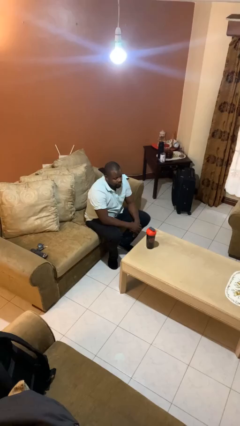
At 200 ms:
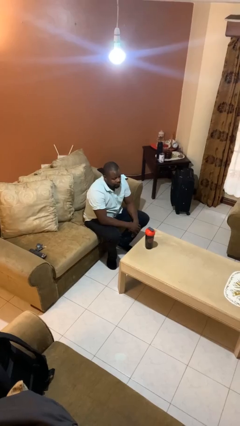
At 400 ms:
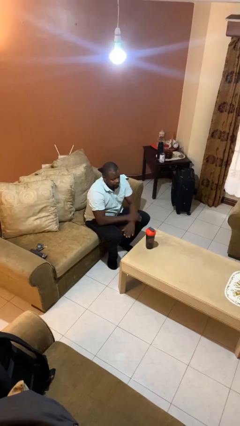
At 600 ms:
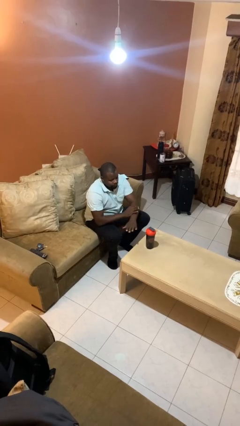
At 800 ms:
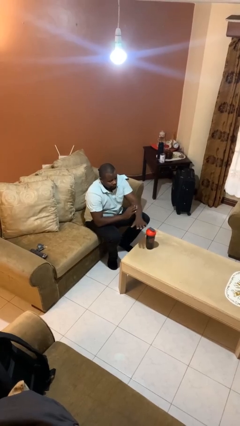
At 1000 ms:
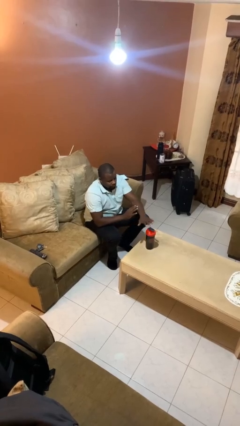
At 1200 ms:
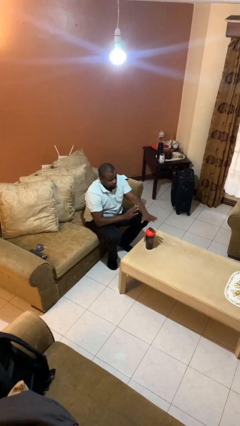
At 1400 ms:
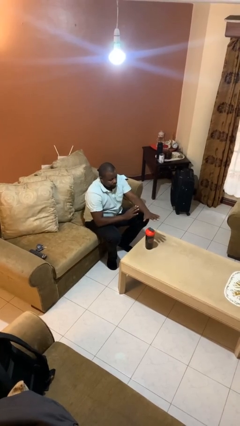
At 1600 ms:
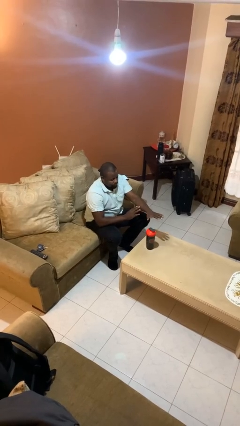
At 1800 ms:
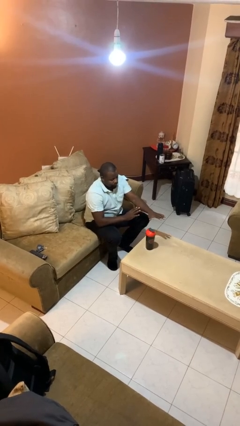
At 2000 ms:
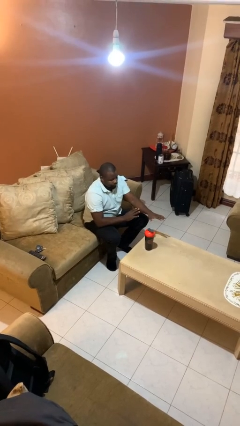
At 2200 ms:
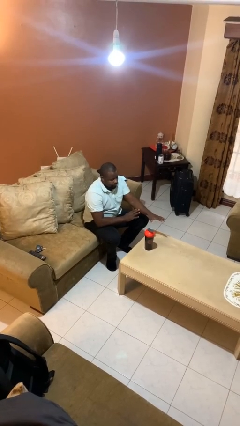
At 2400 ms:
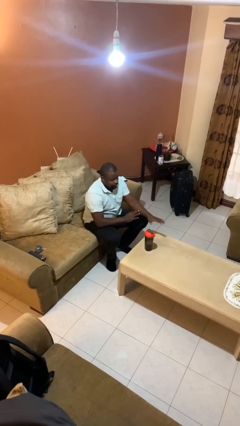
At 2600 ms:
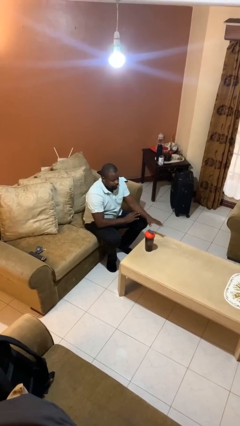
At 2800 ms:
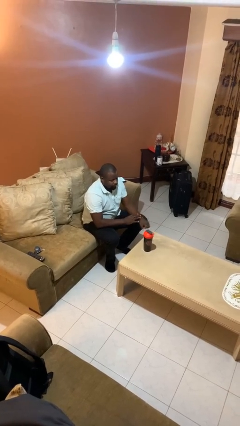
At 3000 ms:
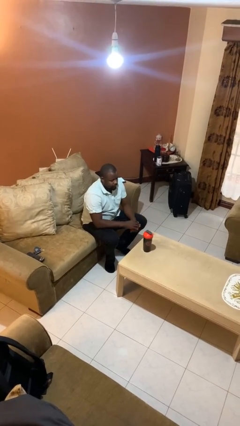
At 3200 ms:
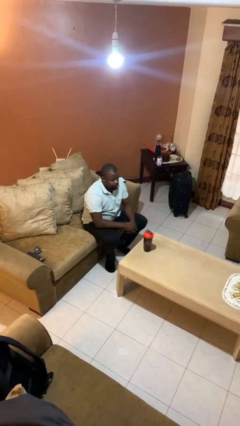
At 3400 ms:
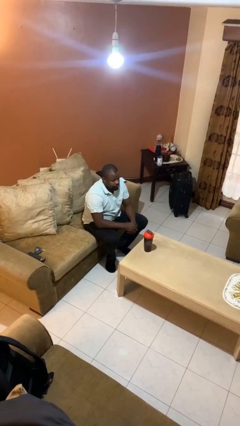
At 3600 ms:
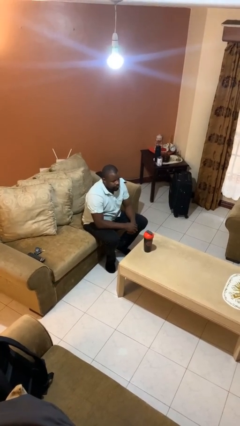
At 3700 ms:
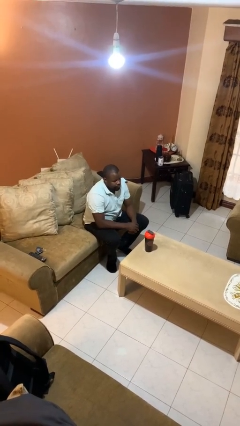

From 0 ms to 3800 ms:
person waves hand over object

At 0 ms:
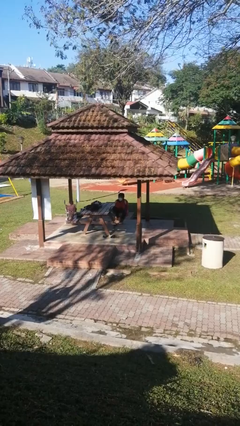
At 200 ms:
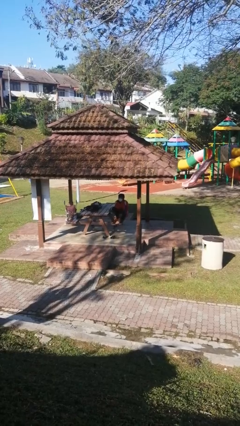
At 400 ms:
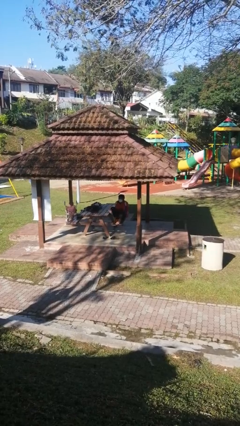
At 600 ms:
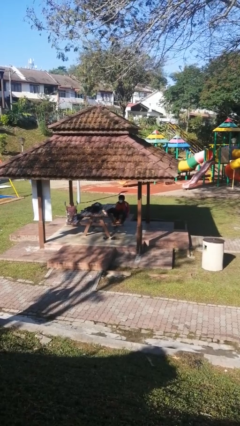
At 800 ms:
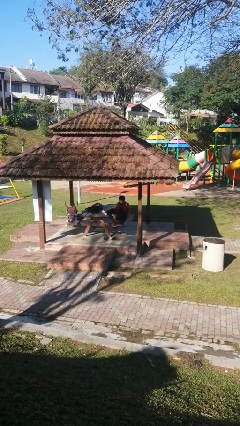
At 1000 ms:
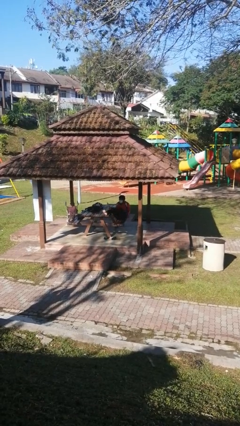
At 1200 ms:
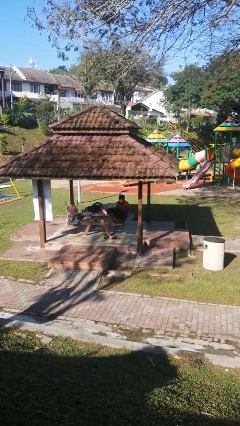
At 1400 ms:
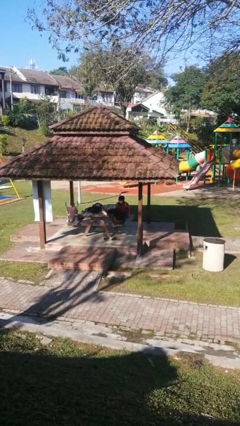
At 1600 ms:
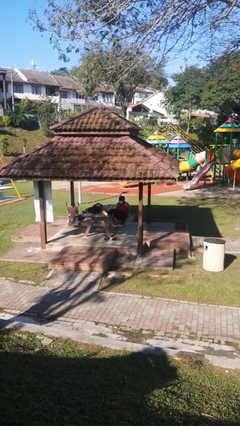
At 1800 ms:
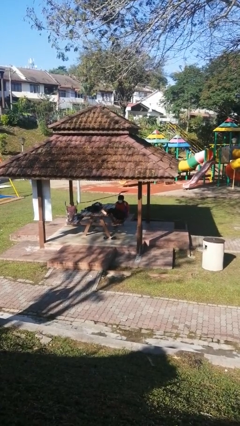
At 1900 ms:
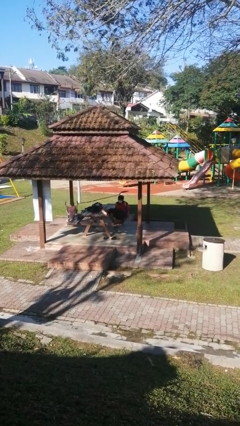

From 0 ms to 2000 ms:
person puts feet up

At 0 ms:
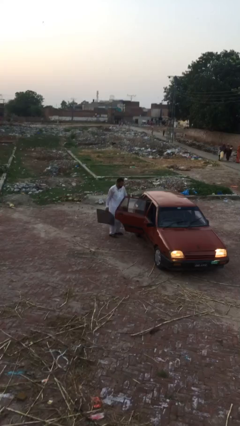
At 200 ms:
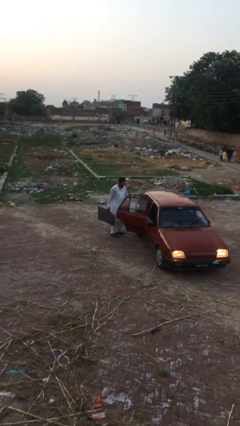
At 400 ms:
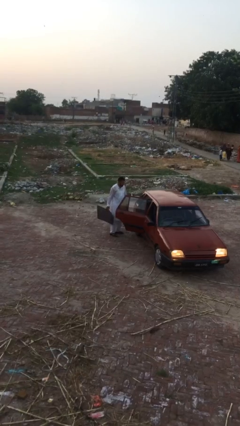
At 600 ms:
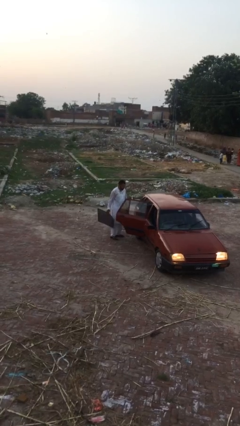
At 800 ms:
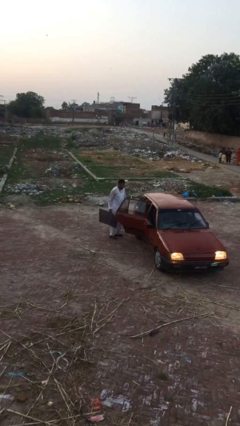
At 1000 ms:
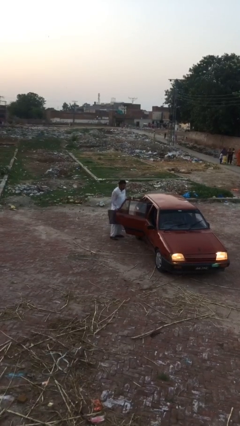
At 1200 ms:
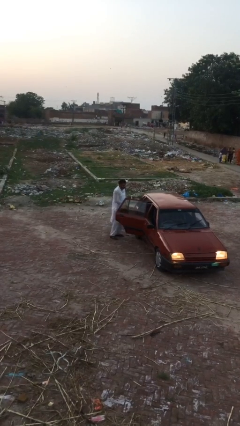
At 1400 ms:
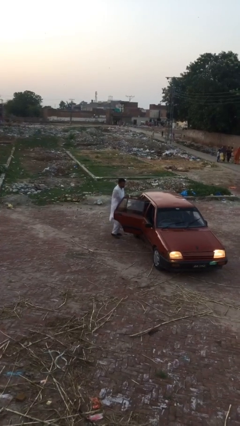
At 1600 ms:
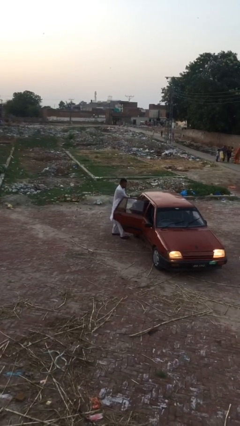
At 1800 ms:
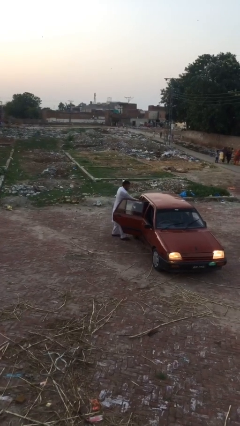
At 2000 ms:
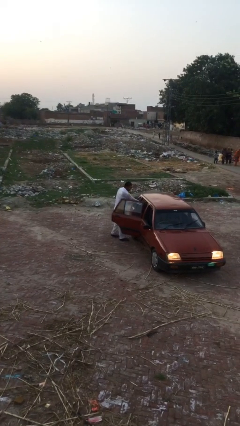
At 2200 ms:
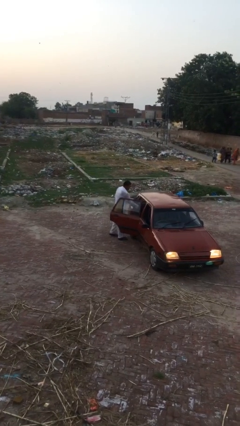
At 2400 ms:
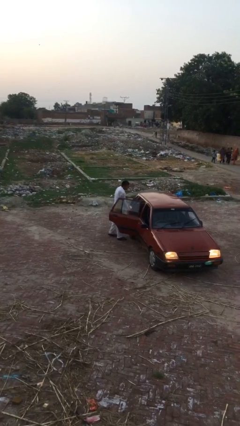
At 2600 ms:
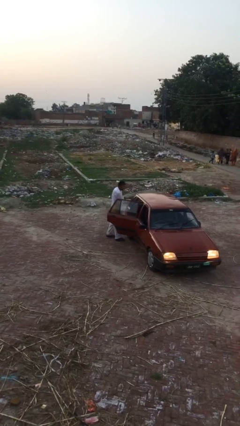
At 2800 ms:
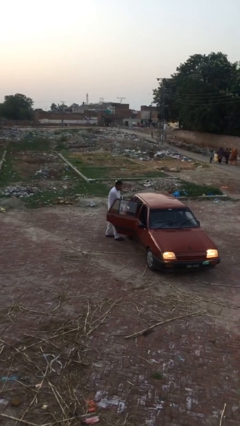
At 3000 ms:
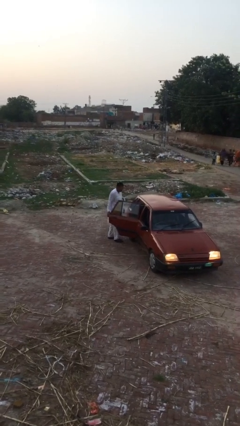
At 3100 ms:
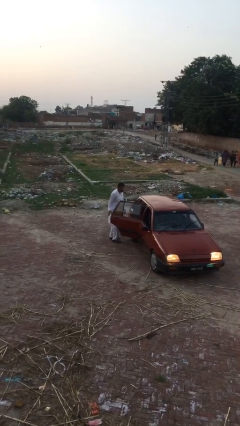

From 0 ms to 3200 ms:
person loads car

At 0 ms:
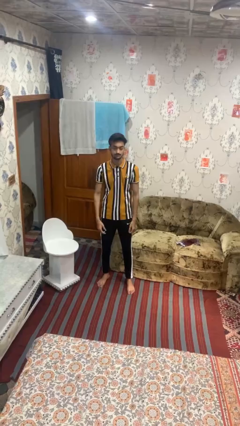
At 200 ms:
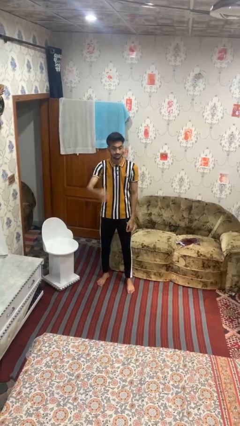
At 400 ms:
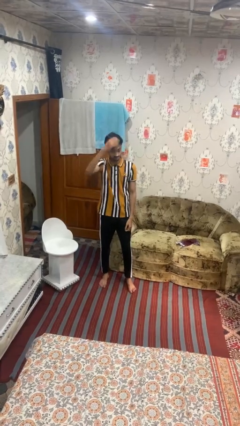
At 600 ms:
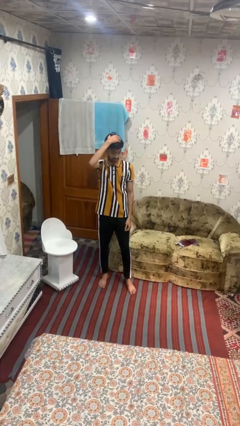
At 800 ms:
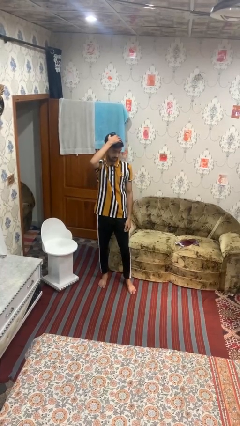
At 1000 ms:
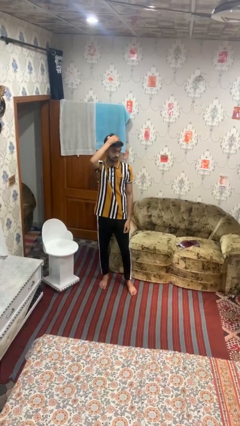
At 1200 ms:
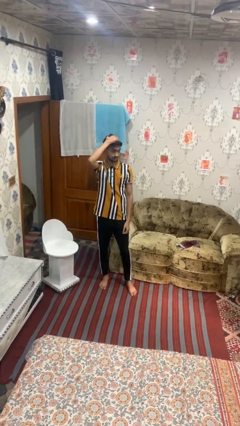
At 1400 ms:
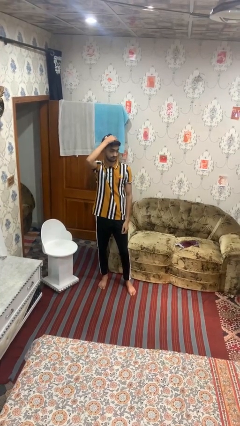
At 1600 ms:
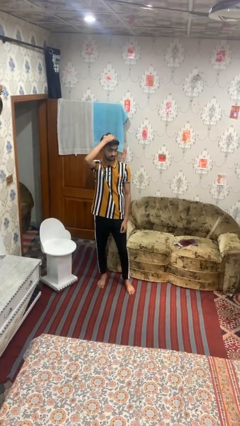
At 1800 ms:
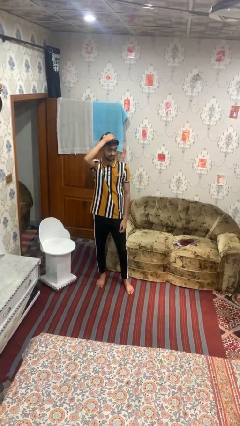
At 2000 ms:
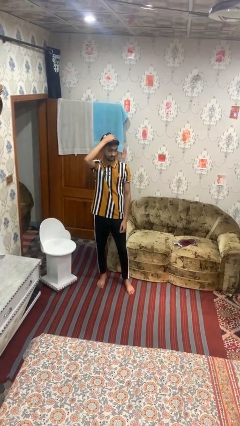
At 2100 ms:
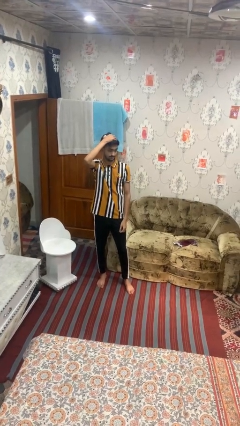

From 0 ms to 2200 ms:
person pats head

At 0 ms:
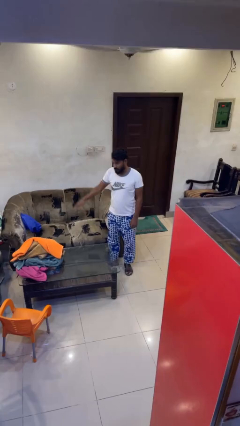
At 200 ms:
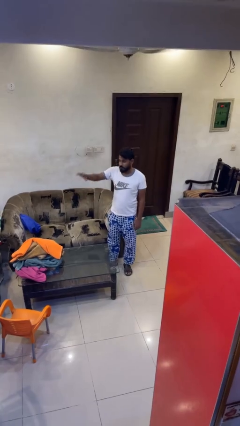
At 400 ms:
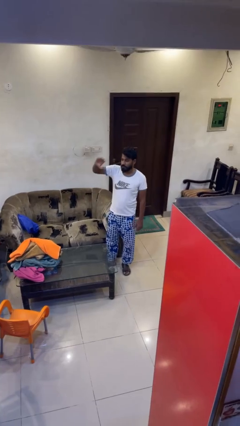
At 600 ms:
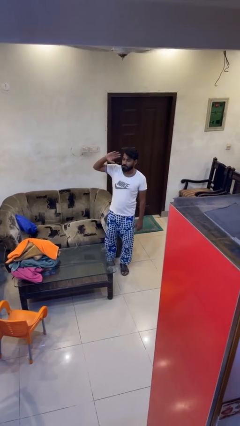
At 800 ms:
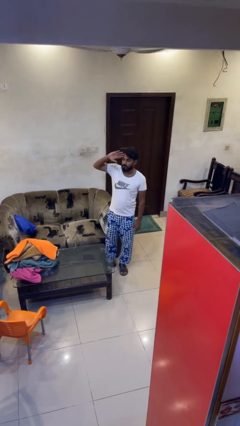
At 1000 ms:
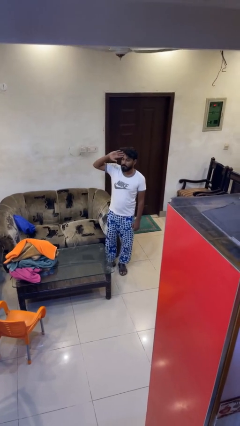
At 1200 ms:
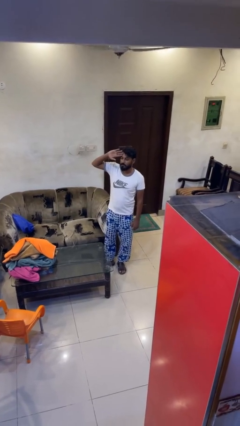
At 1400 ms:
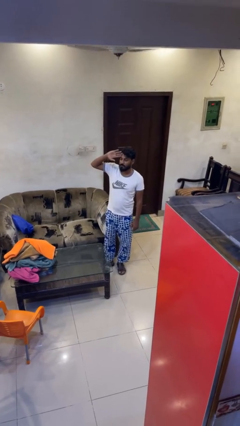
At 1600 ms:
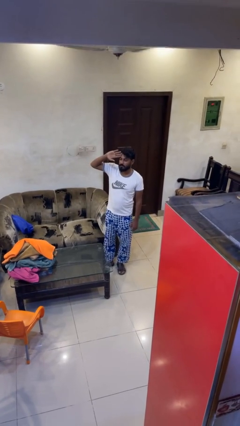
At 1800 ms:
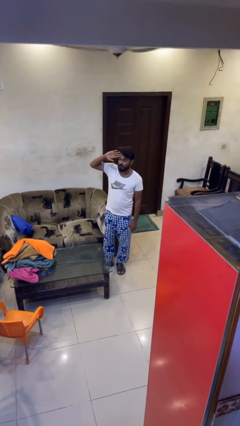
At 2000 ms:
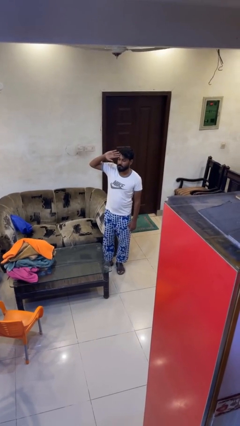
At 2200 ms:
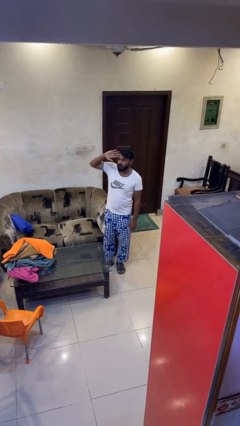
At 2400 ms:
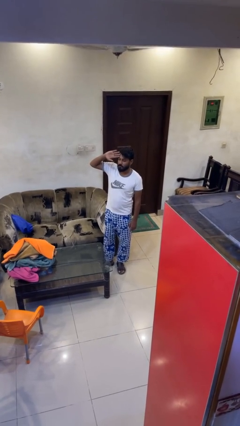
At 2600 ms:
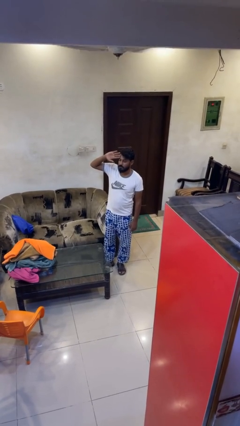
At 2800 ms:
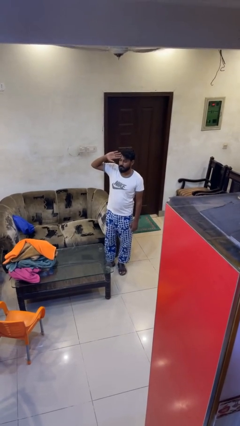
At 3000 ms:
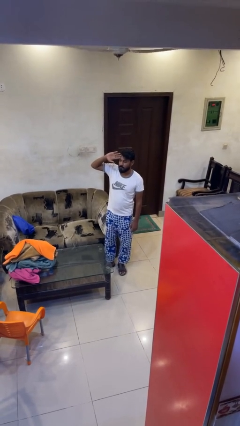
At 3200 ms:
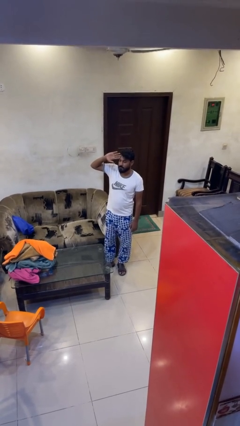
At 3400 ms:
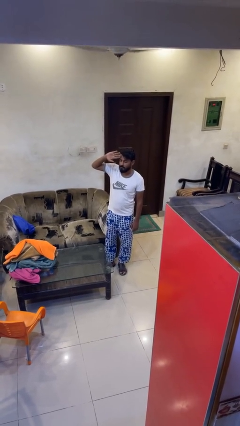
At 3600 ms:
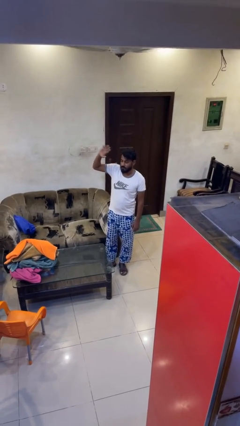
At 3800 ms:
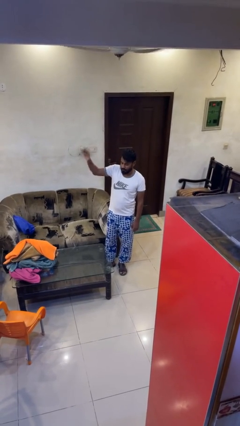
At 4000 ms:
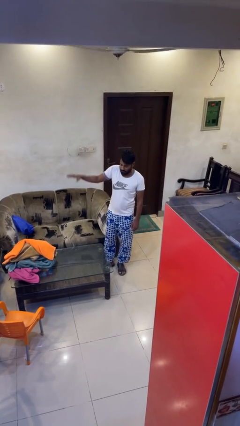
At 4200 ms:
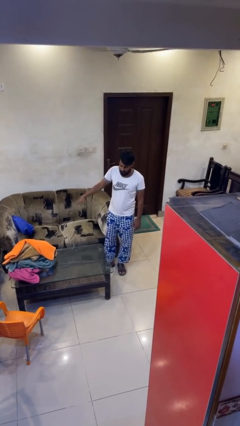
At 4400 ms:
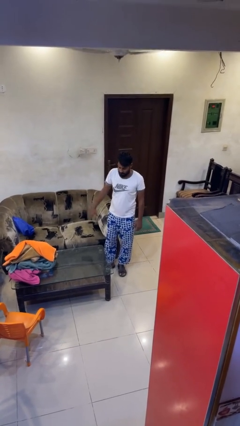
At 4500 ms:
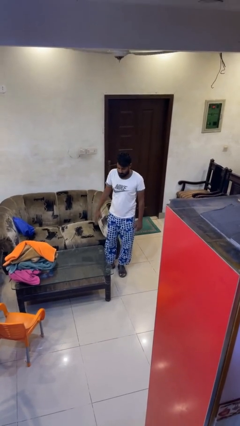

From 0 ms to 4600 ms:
person salutes

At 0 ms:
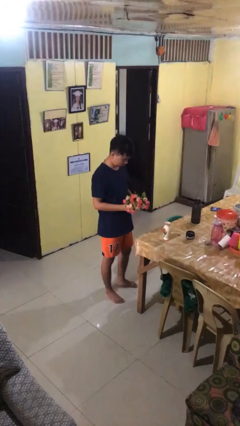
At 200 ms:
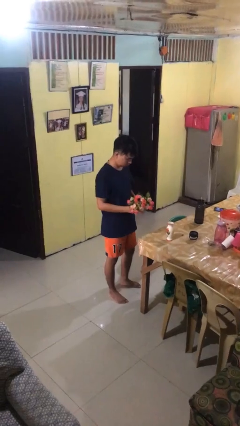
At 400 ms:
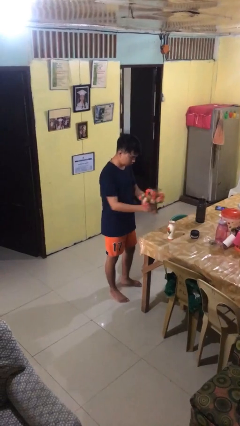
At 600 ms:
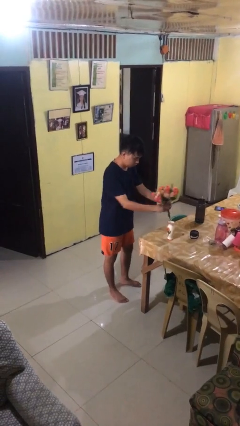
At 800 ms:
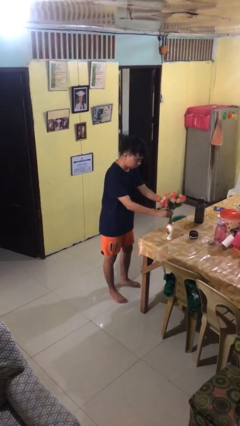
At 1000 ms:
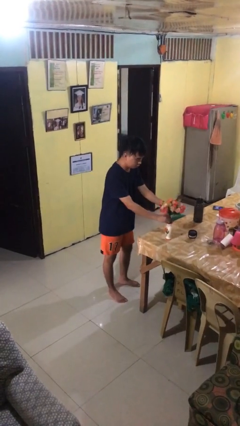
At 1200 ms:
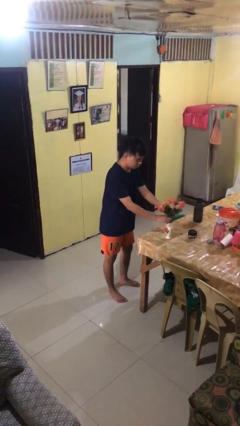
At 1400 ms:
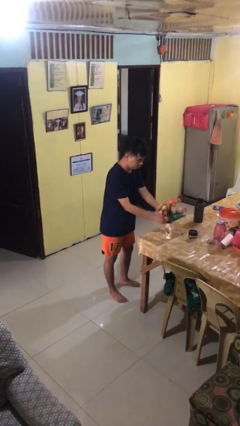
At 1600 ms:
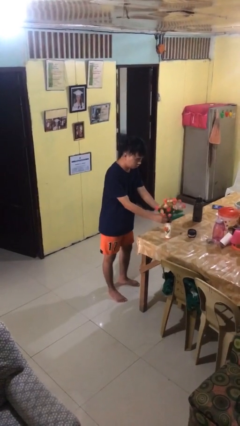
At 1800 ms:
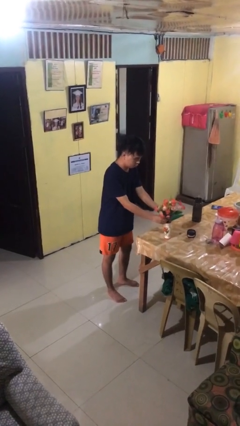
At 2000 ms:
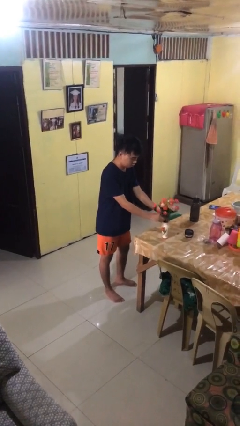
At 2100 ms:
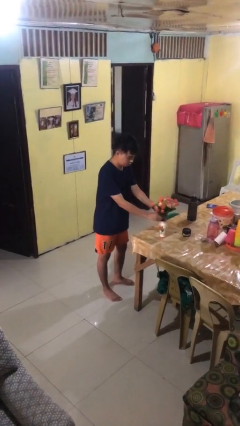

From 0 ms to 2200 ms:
person arranges flowers in vase
